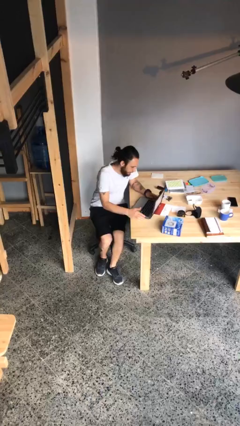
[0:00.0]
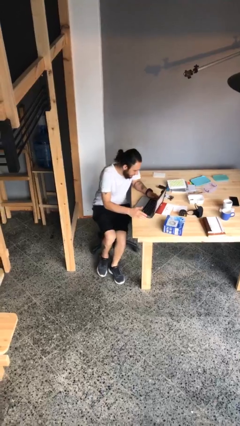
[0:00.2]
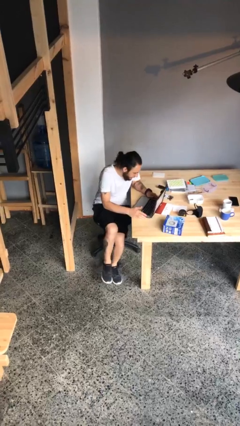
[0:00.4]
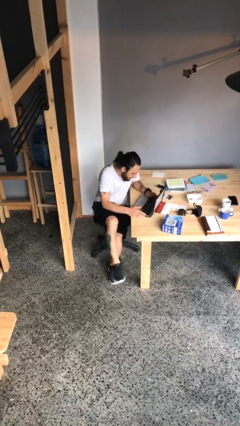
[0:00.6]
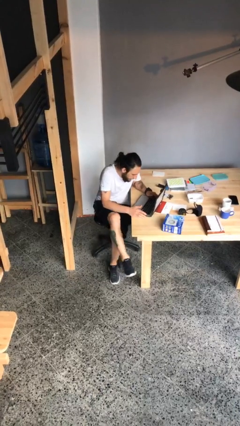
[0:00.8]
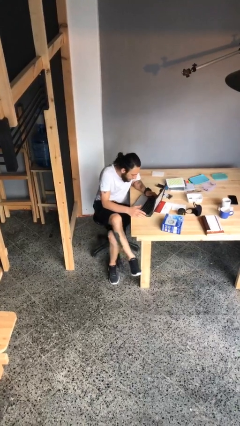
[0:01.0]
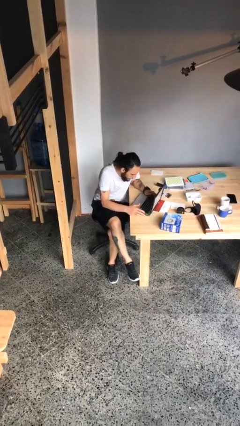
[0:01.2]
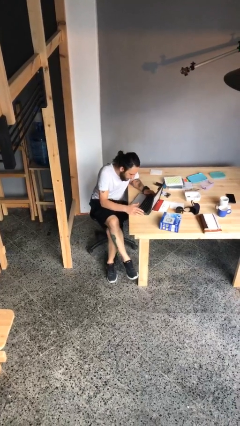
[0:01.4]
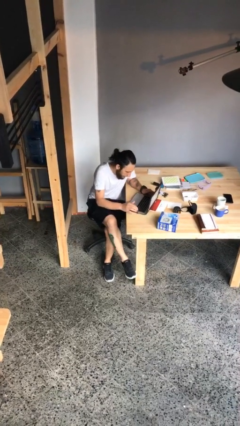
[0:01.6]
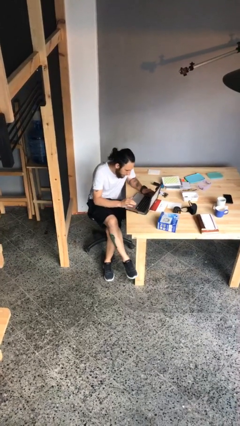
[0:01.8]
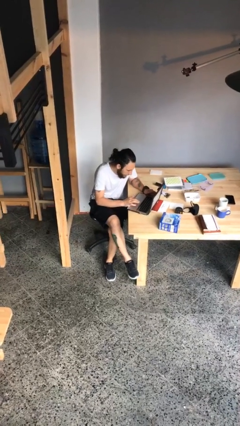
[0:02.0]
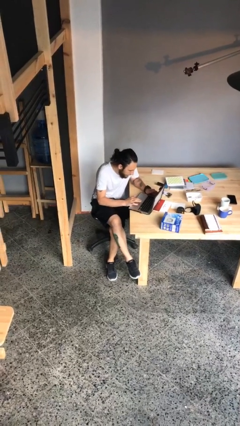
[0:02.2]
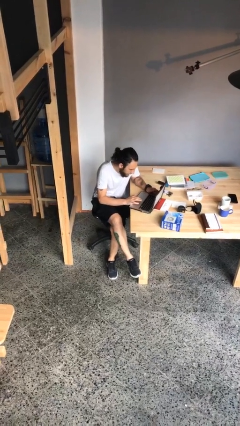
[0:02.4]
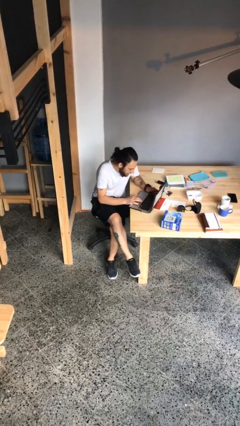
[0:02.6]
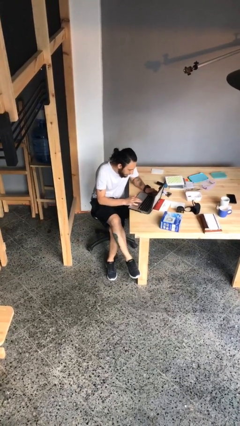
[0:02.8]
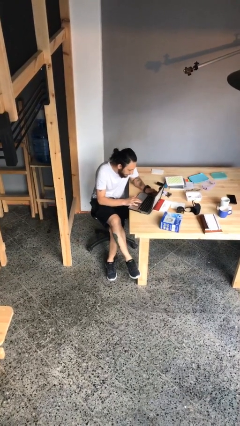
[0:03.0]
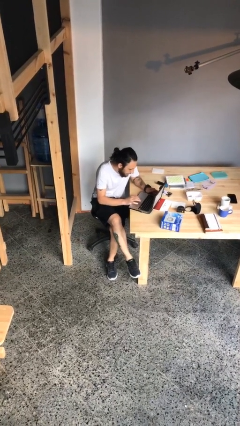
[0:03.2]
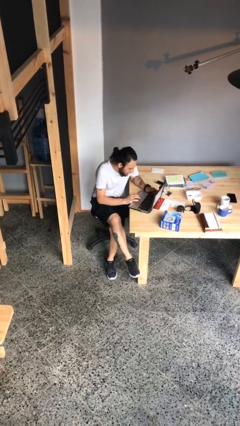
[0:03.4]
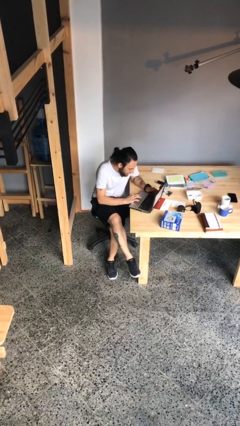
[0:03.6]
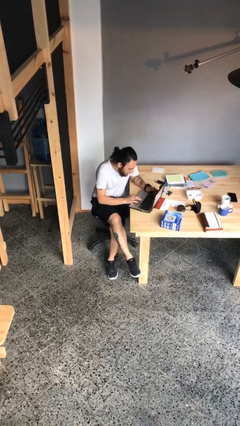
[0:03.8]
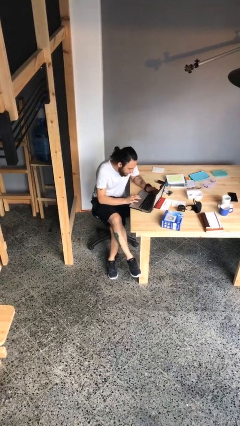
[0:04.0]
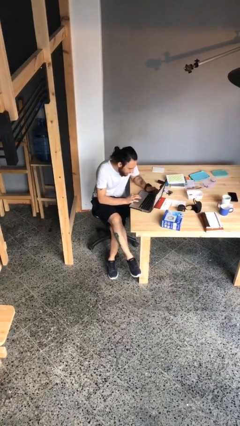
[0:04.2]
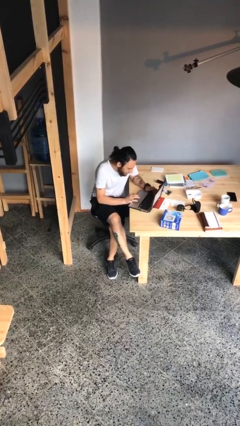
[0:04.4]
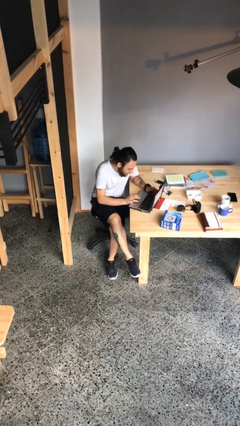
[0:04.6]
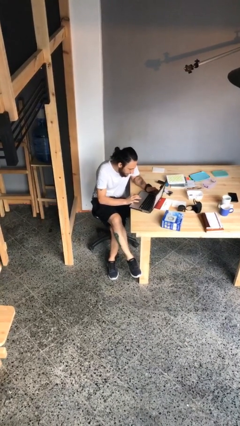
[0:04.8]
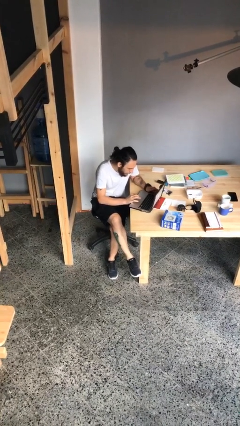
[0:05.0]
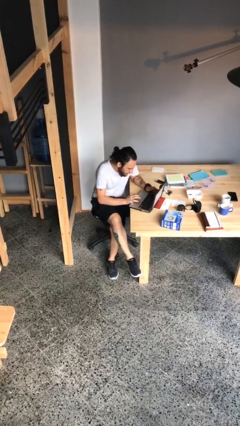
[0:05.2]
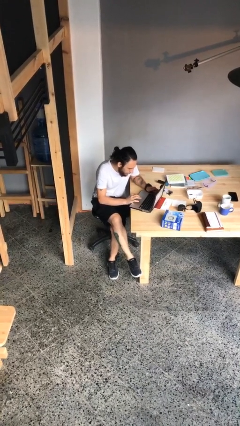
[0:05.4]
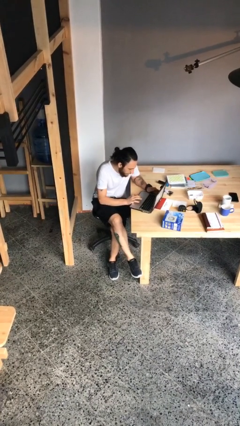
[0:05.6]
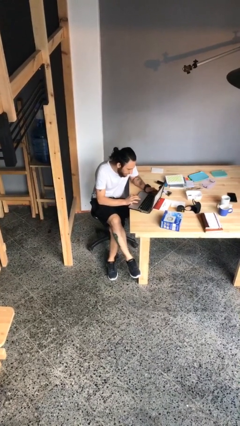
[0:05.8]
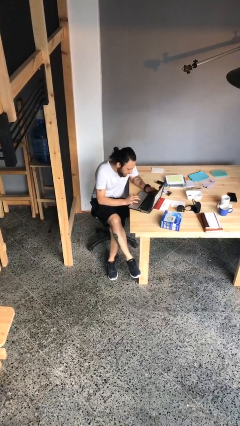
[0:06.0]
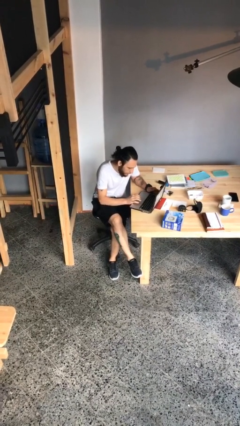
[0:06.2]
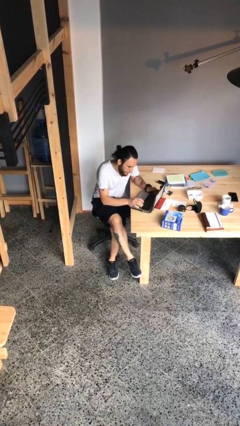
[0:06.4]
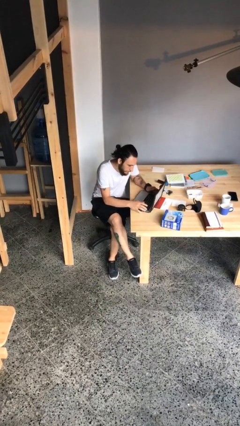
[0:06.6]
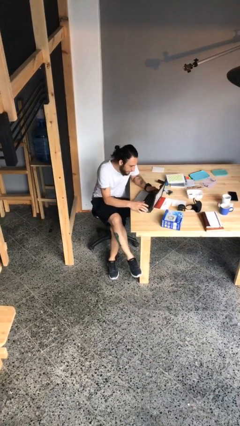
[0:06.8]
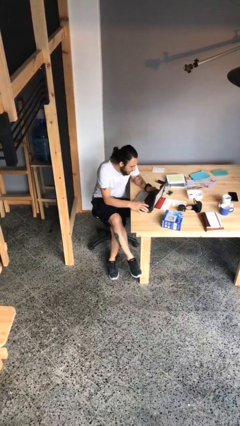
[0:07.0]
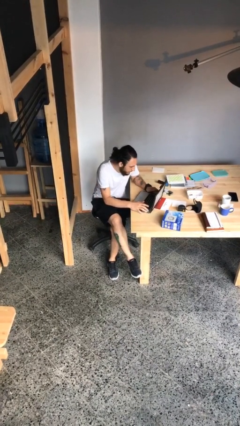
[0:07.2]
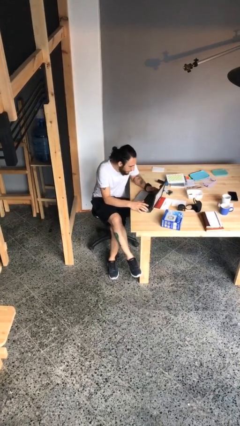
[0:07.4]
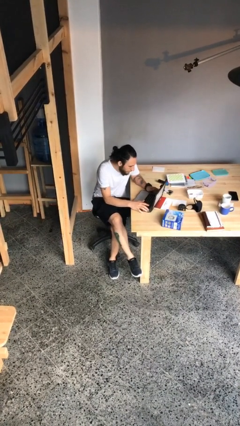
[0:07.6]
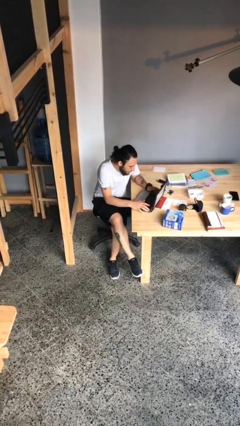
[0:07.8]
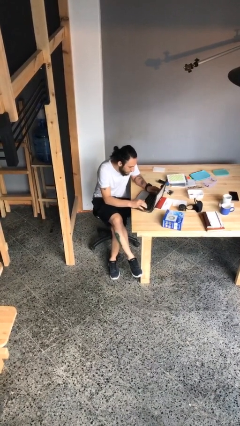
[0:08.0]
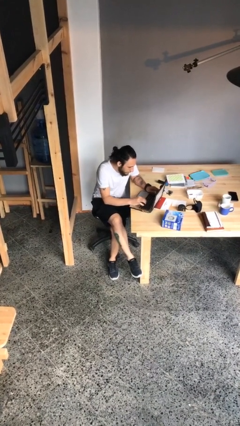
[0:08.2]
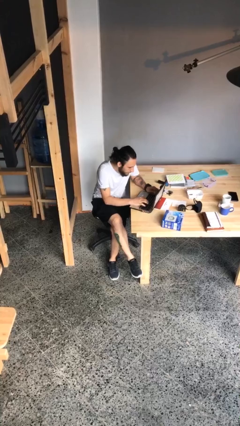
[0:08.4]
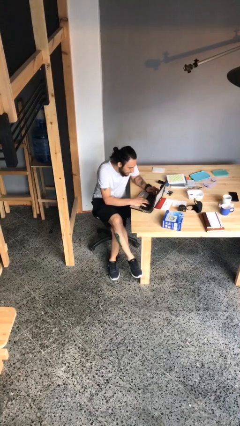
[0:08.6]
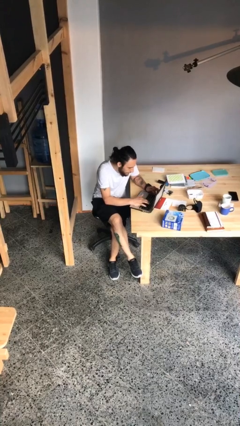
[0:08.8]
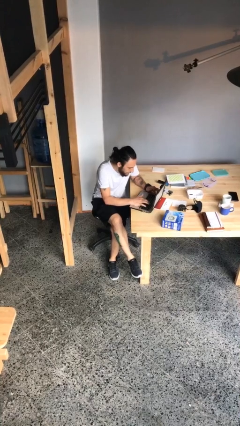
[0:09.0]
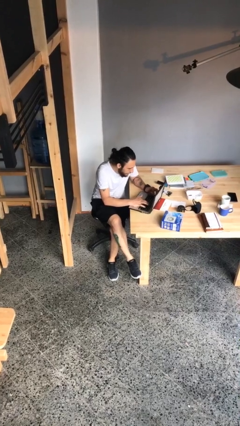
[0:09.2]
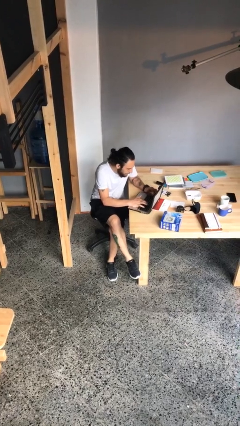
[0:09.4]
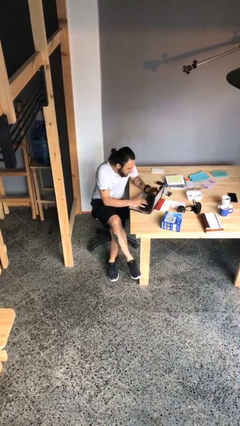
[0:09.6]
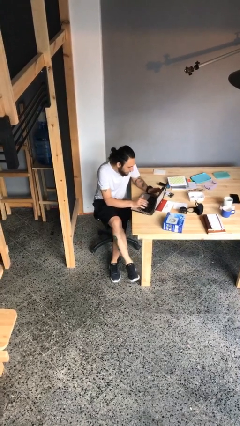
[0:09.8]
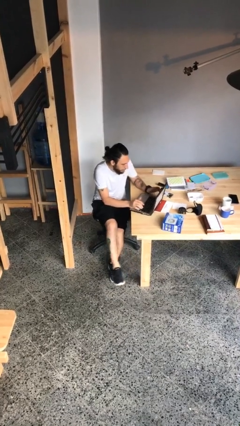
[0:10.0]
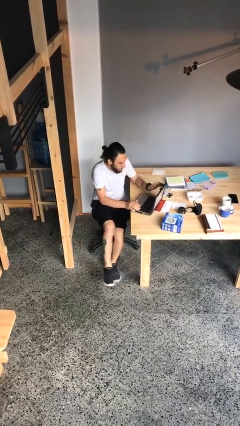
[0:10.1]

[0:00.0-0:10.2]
person interacts with laptop

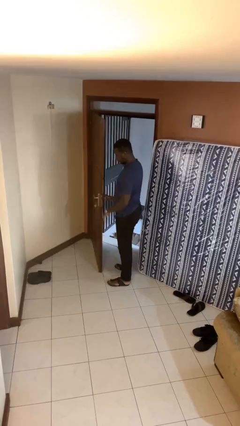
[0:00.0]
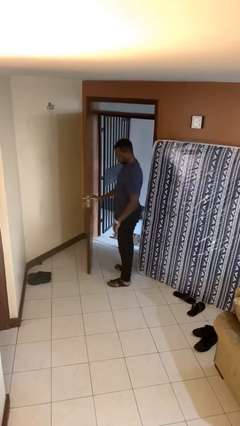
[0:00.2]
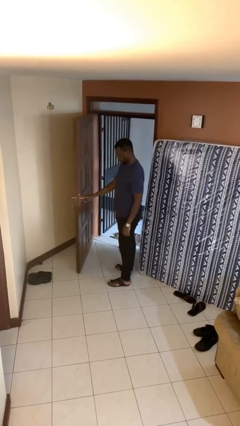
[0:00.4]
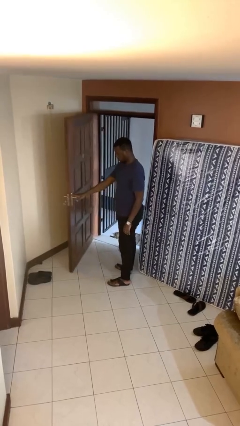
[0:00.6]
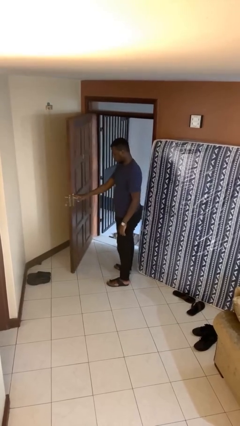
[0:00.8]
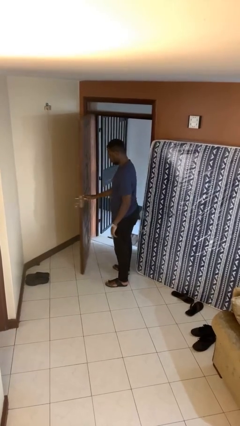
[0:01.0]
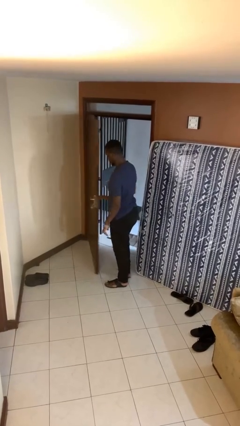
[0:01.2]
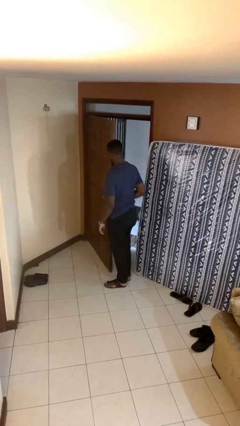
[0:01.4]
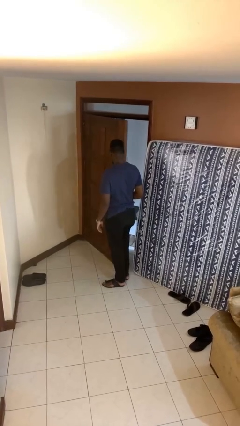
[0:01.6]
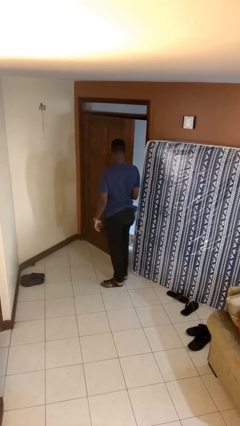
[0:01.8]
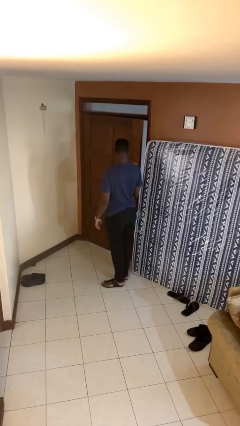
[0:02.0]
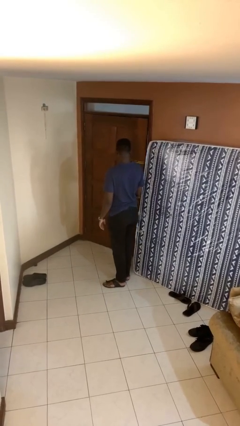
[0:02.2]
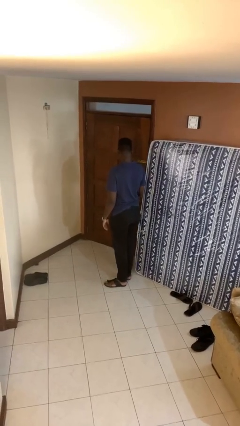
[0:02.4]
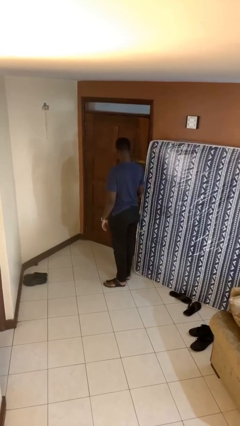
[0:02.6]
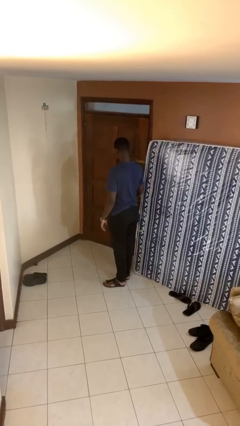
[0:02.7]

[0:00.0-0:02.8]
person closes facility door

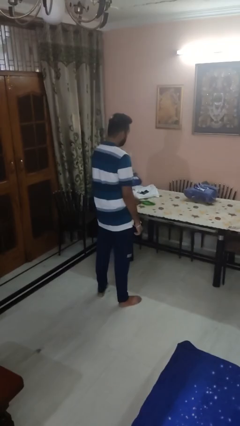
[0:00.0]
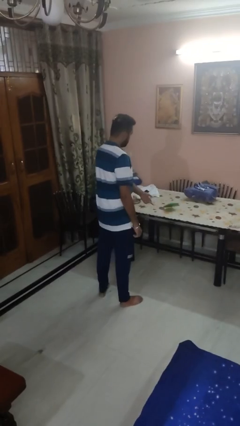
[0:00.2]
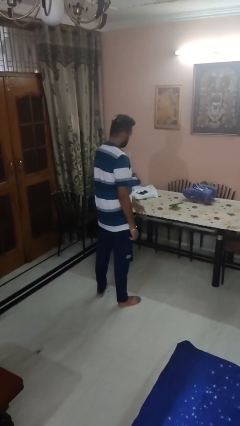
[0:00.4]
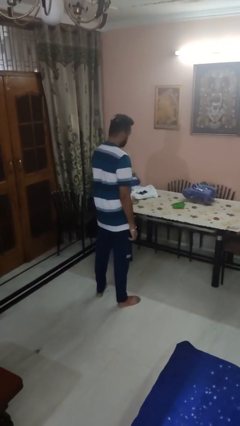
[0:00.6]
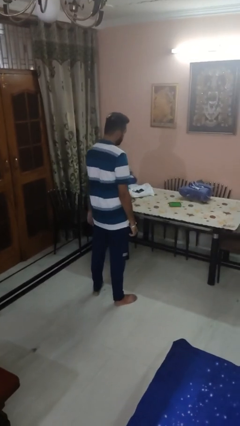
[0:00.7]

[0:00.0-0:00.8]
person throws object on table

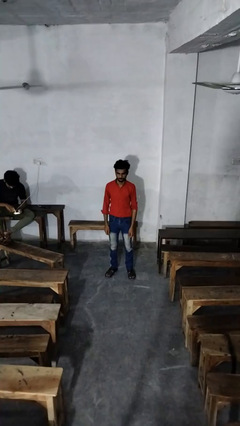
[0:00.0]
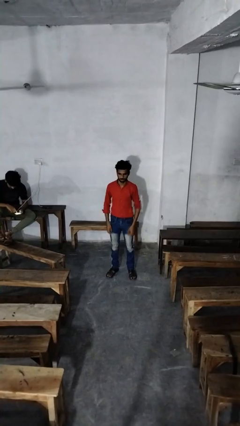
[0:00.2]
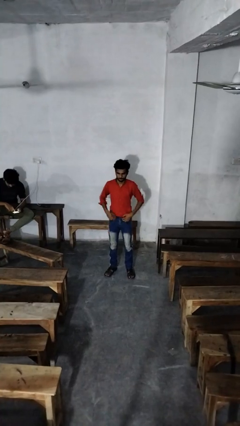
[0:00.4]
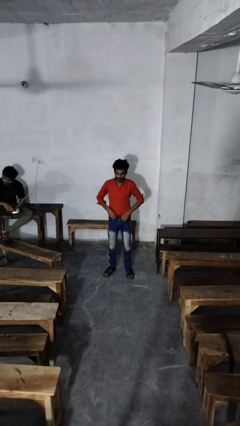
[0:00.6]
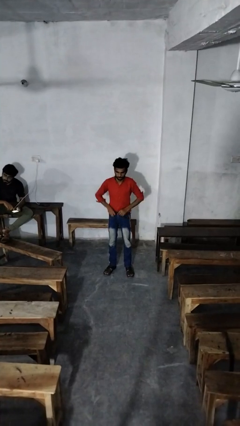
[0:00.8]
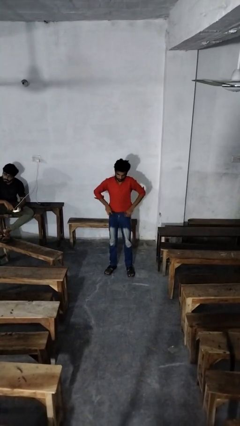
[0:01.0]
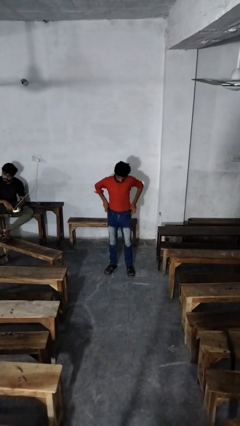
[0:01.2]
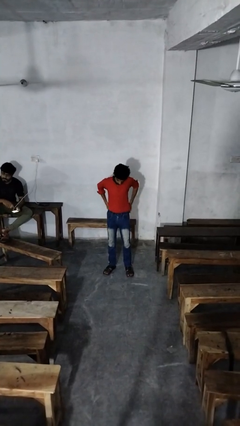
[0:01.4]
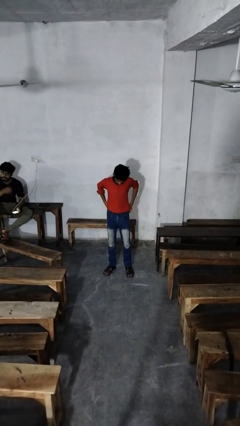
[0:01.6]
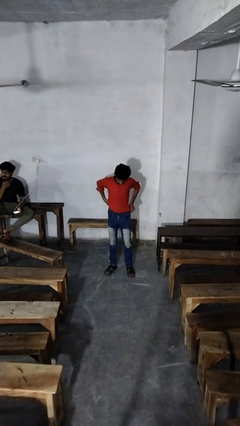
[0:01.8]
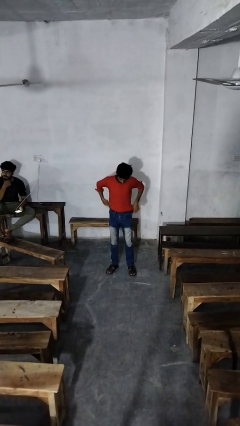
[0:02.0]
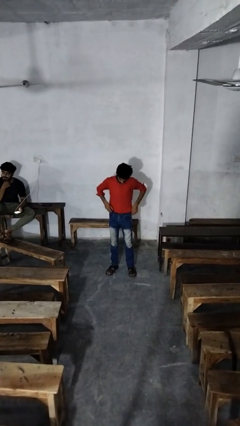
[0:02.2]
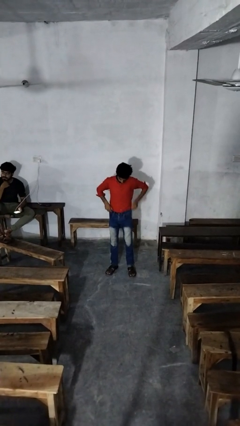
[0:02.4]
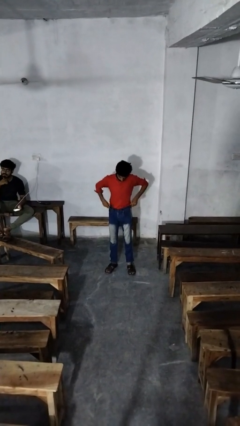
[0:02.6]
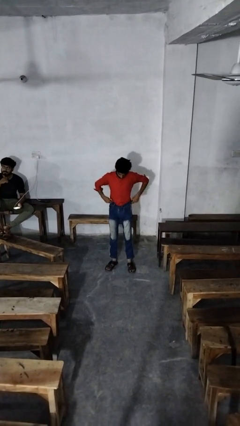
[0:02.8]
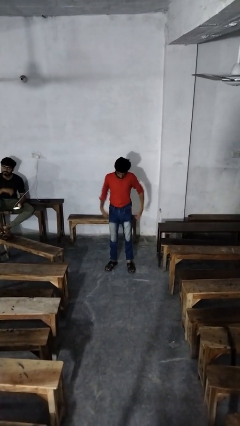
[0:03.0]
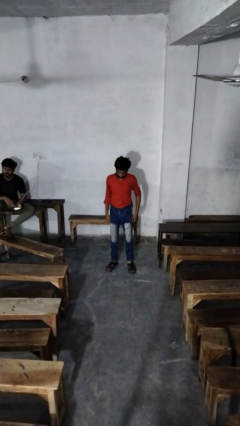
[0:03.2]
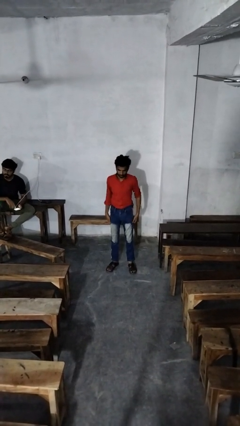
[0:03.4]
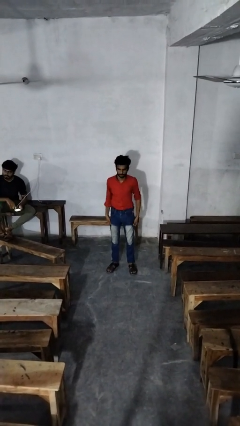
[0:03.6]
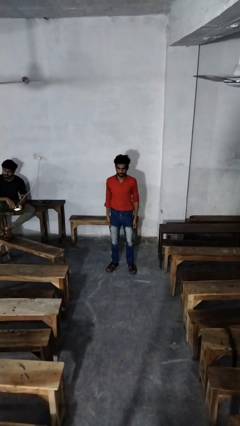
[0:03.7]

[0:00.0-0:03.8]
person hikes up pants

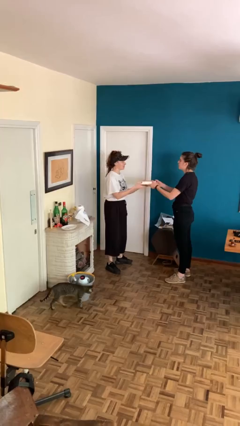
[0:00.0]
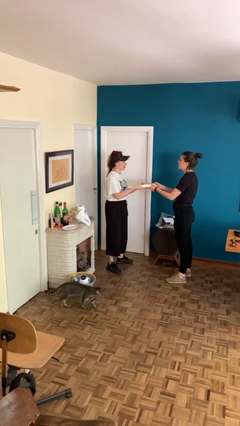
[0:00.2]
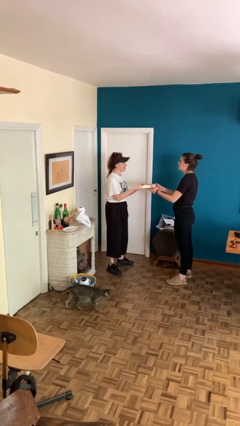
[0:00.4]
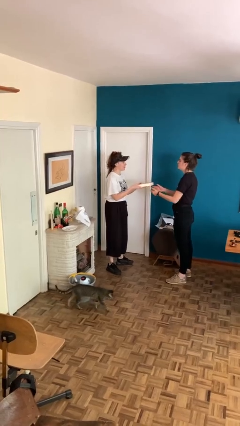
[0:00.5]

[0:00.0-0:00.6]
person transfers object to person
